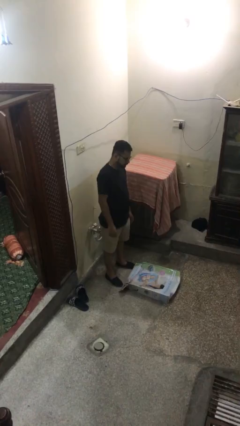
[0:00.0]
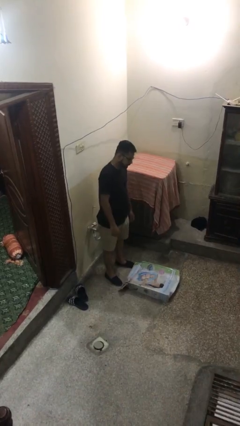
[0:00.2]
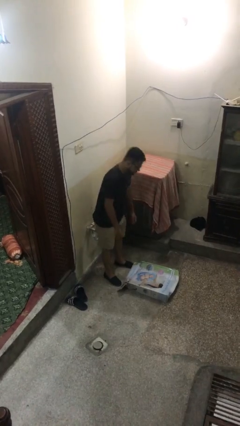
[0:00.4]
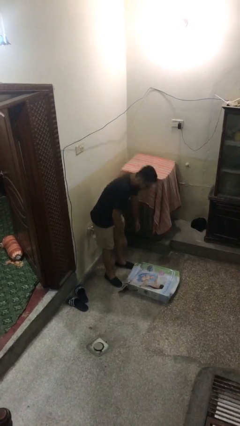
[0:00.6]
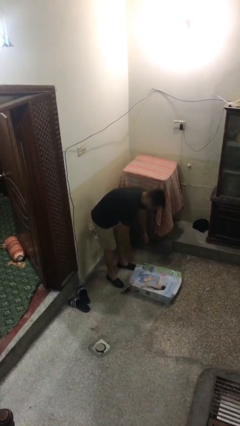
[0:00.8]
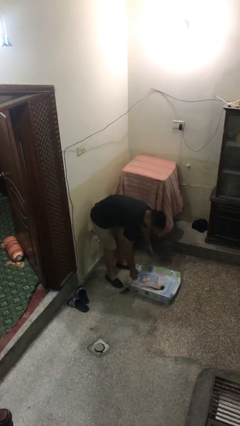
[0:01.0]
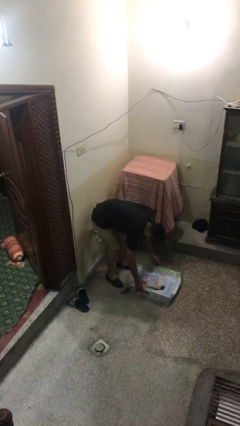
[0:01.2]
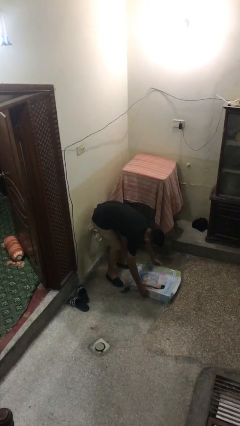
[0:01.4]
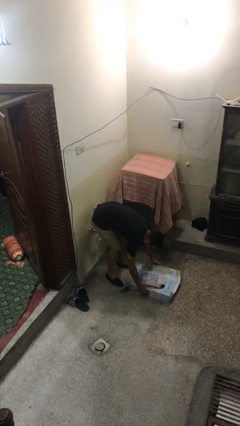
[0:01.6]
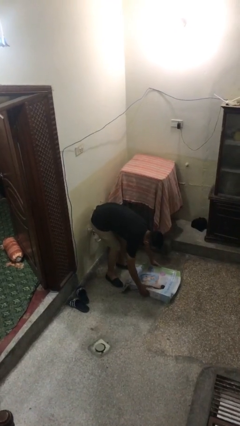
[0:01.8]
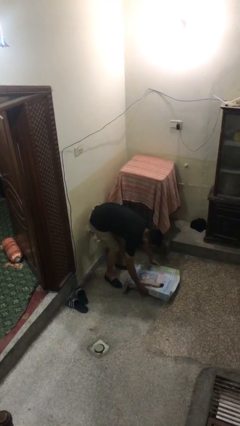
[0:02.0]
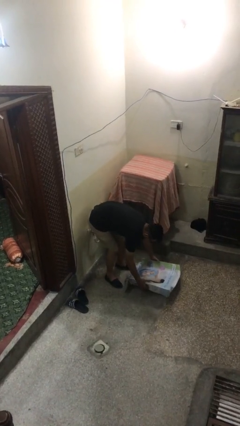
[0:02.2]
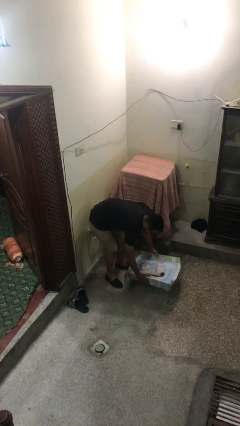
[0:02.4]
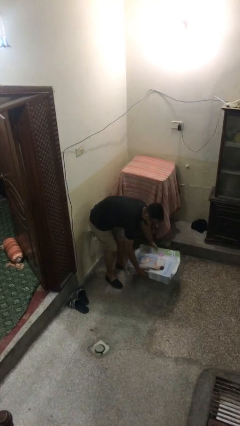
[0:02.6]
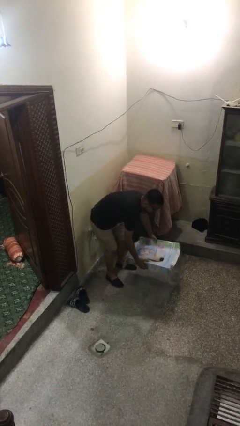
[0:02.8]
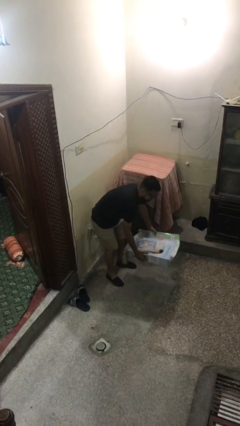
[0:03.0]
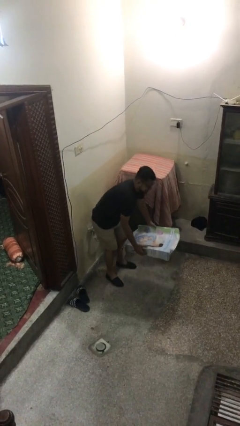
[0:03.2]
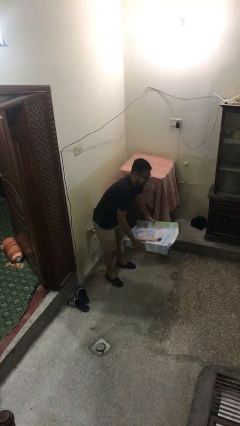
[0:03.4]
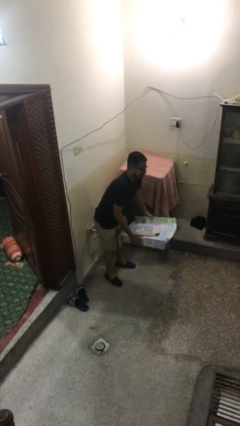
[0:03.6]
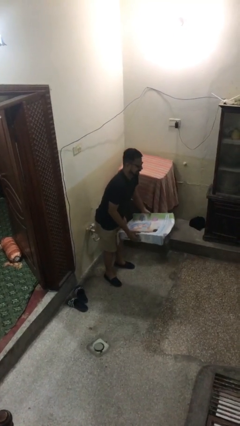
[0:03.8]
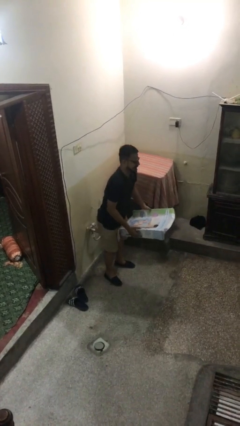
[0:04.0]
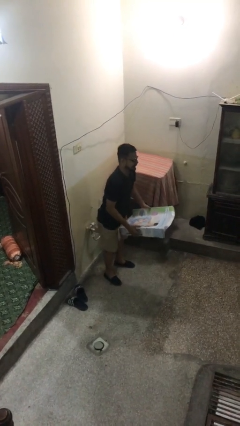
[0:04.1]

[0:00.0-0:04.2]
person picks up object from floor

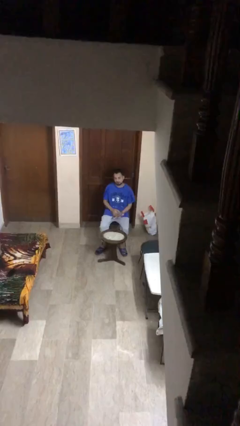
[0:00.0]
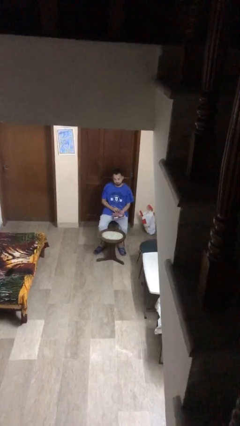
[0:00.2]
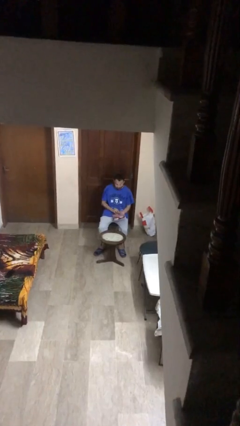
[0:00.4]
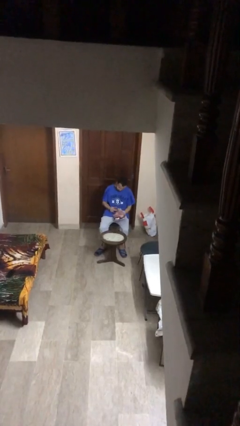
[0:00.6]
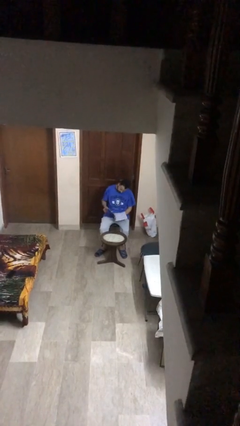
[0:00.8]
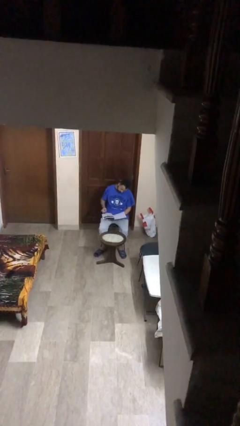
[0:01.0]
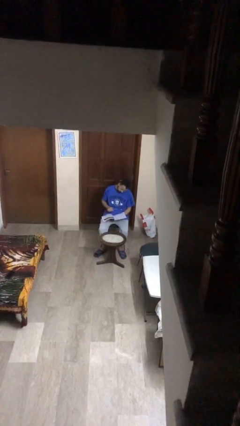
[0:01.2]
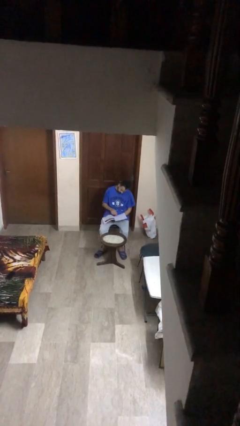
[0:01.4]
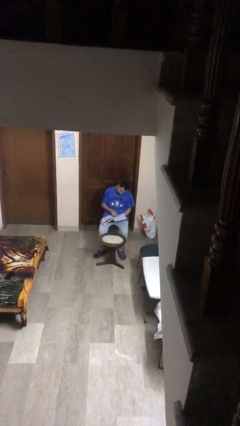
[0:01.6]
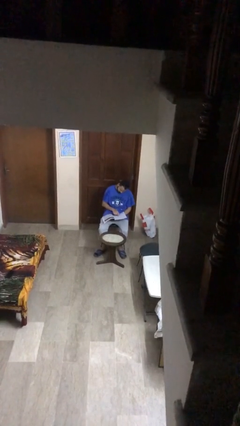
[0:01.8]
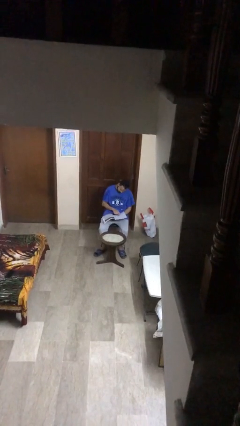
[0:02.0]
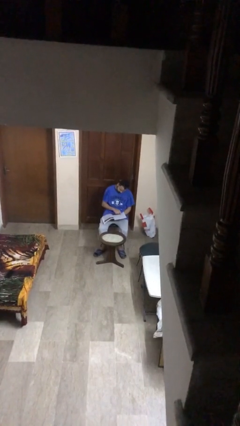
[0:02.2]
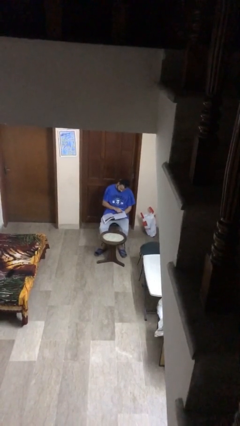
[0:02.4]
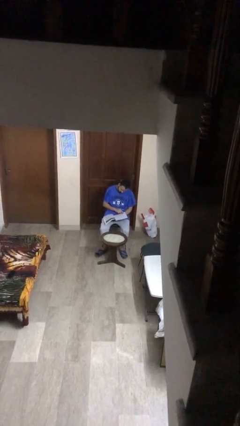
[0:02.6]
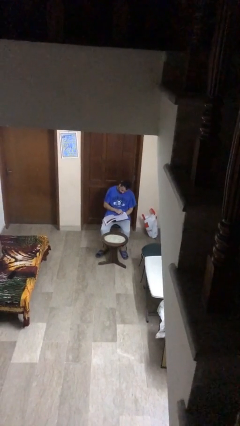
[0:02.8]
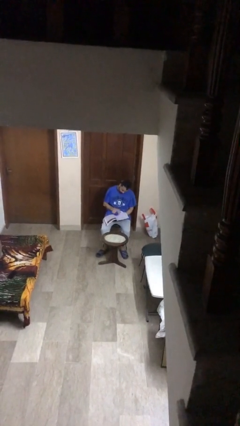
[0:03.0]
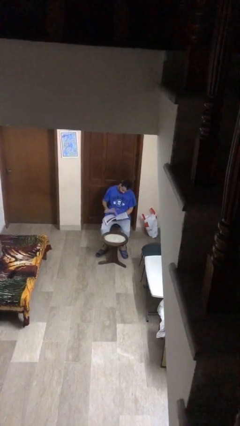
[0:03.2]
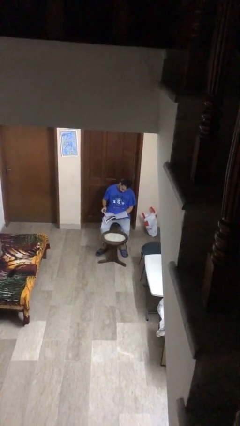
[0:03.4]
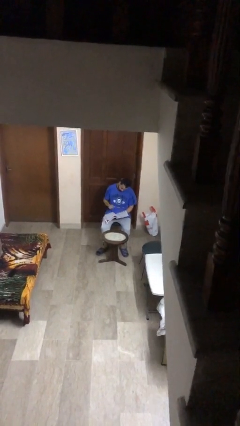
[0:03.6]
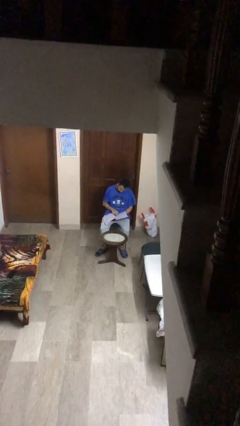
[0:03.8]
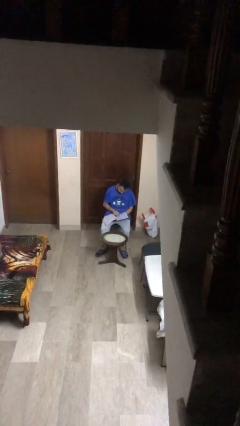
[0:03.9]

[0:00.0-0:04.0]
person reads document

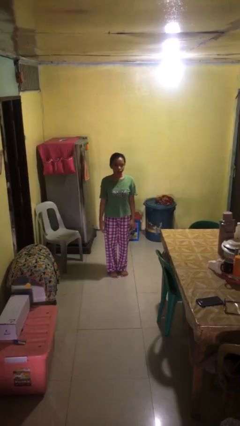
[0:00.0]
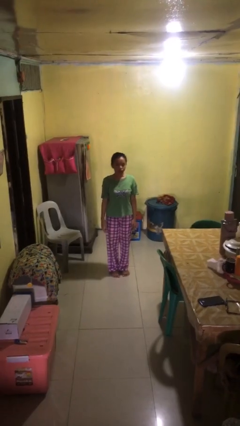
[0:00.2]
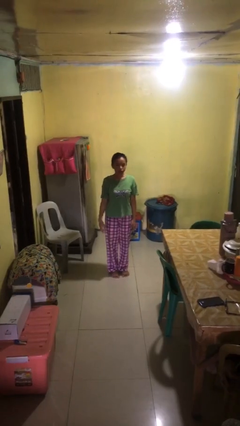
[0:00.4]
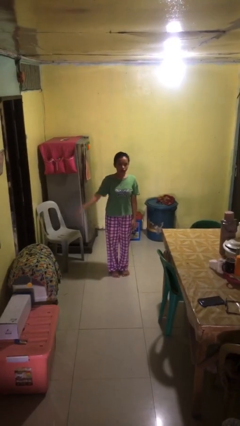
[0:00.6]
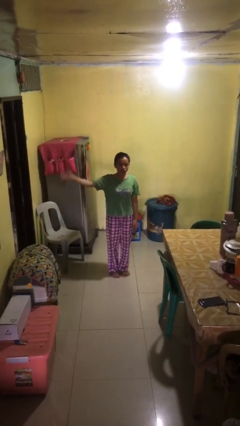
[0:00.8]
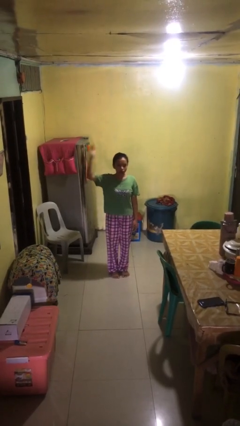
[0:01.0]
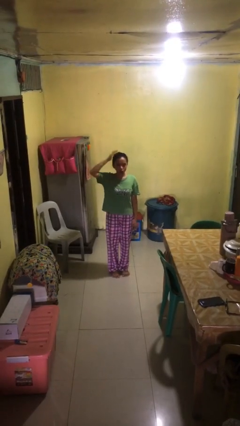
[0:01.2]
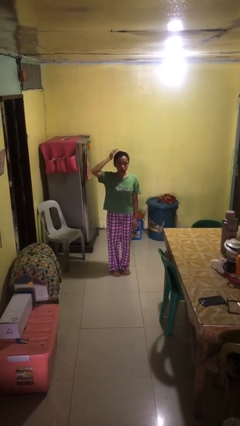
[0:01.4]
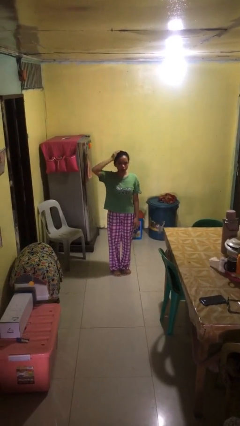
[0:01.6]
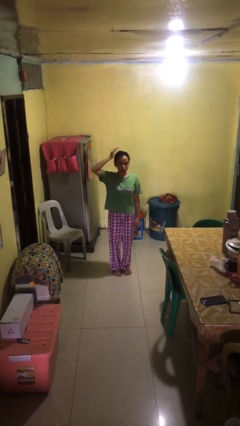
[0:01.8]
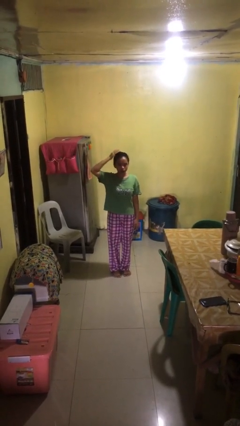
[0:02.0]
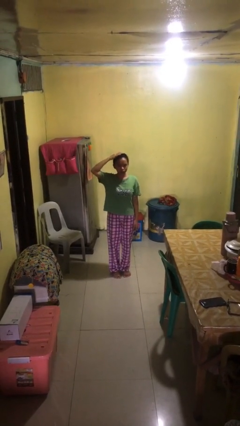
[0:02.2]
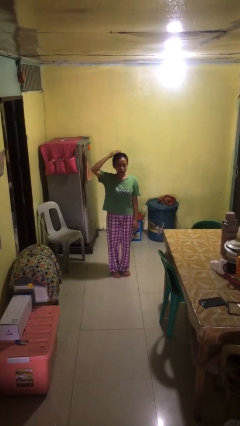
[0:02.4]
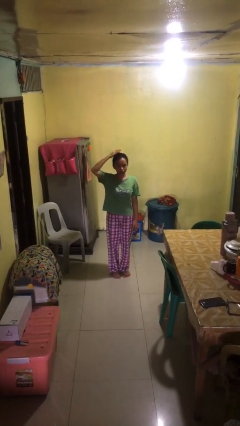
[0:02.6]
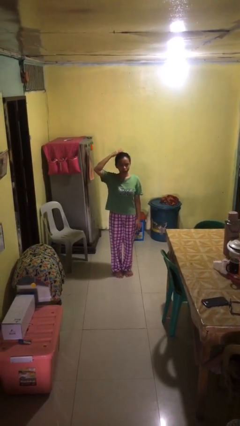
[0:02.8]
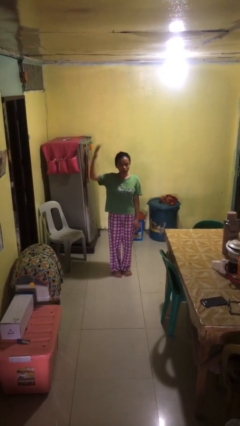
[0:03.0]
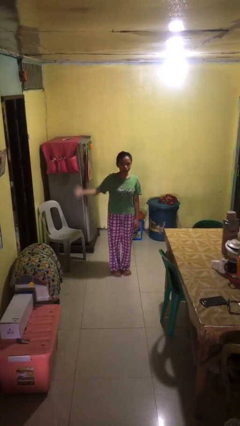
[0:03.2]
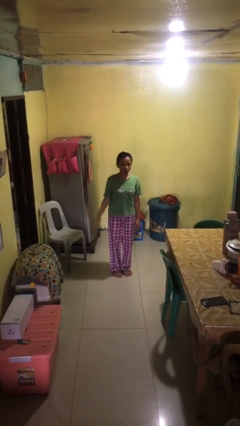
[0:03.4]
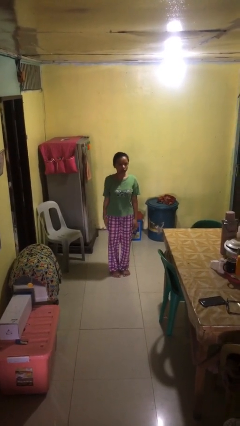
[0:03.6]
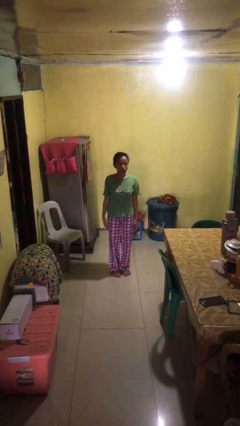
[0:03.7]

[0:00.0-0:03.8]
person pats head

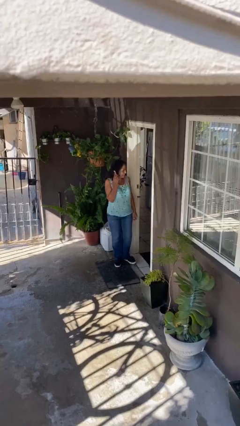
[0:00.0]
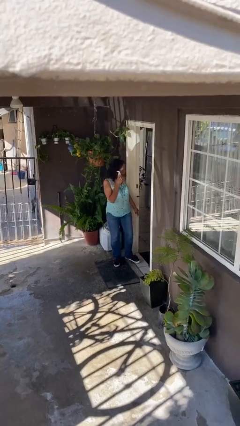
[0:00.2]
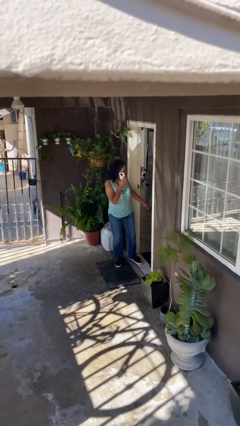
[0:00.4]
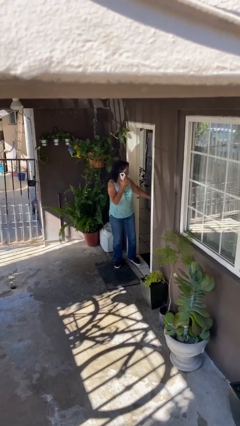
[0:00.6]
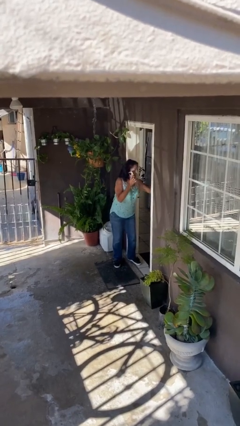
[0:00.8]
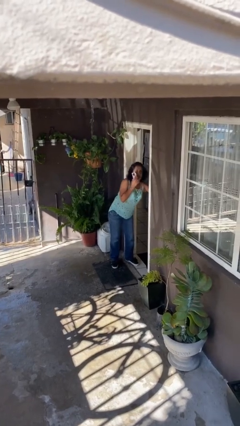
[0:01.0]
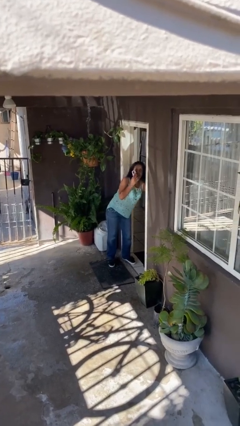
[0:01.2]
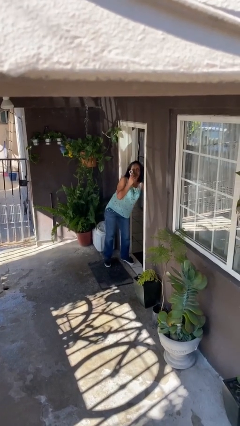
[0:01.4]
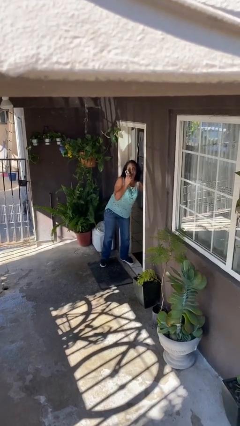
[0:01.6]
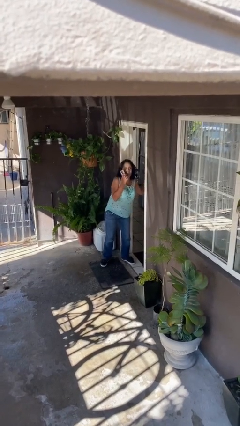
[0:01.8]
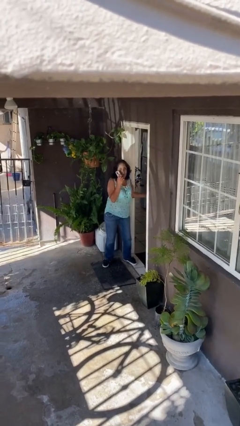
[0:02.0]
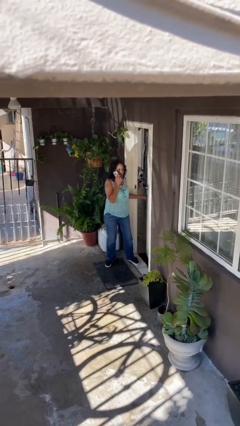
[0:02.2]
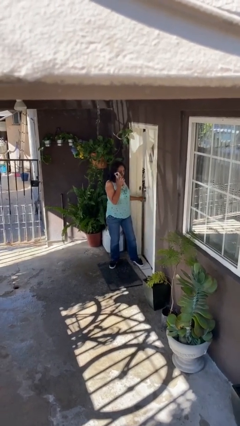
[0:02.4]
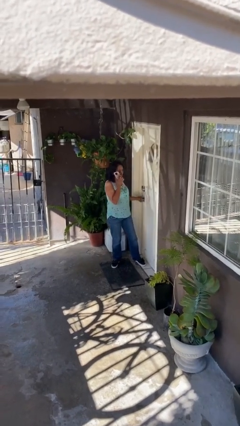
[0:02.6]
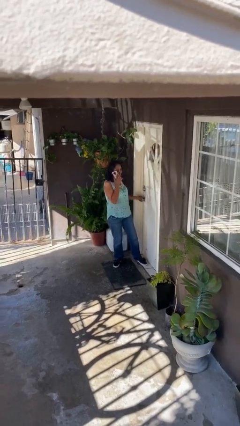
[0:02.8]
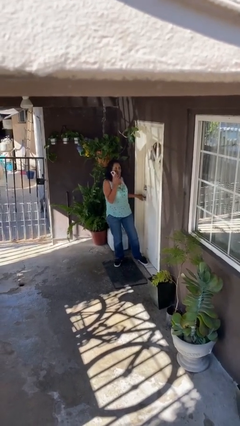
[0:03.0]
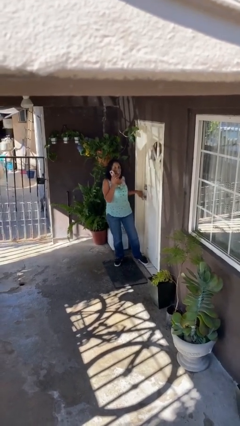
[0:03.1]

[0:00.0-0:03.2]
person closes facility door

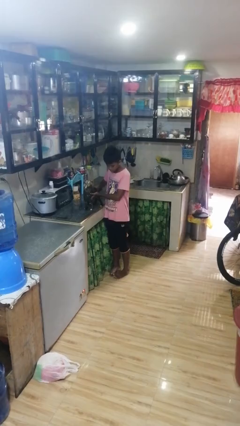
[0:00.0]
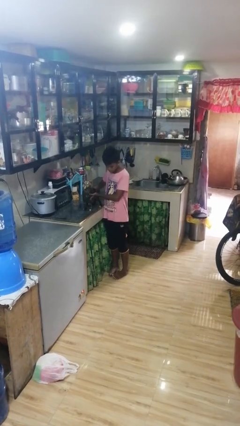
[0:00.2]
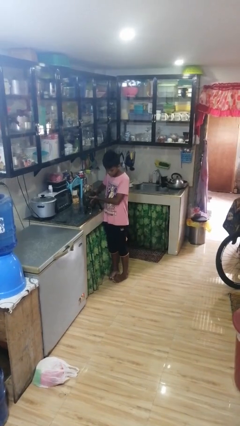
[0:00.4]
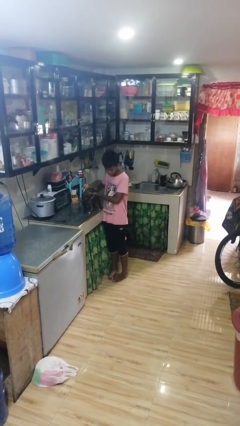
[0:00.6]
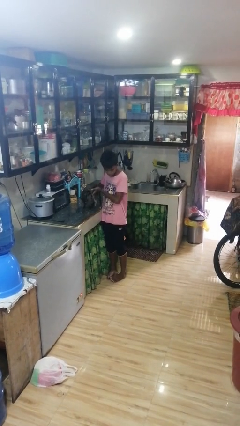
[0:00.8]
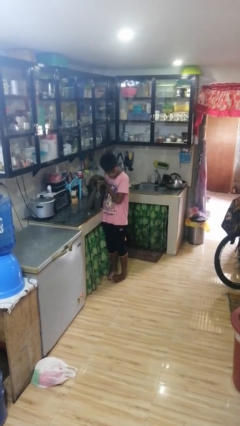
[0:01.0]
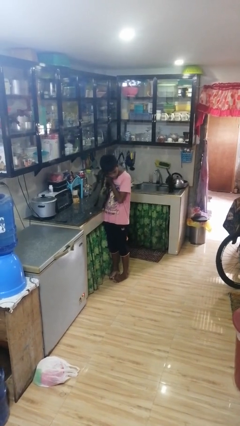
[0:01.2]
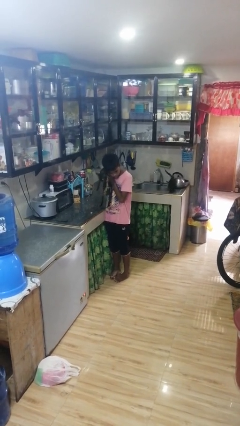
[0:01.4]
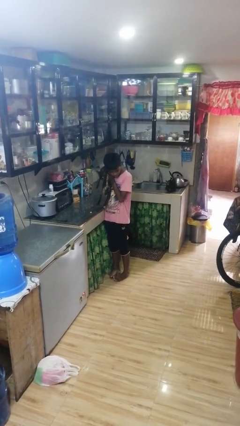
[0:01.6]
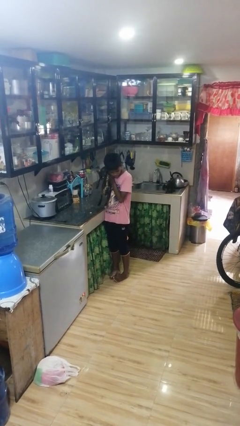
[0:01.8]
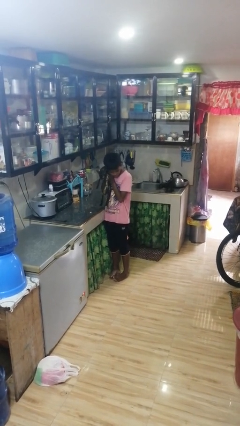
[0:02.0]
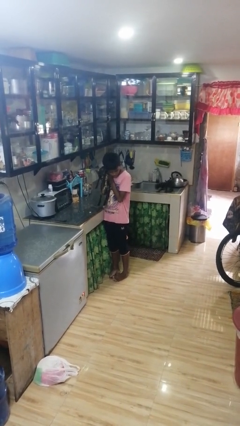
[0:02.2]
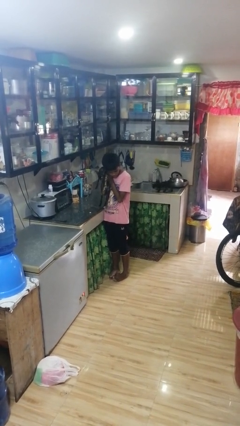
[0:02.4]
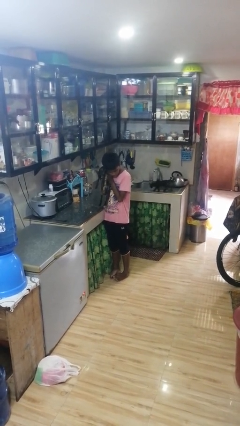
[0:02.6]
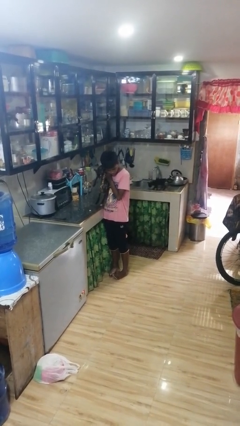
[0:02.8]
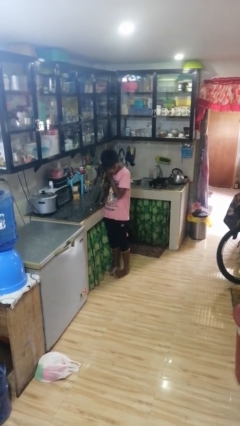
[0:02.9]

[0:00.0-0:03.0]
person hugs cat
